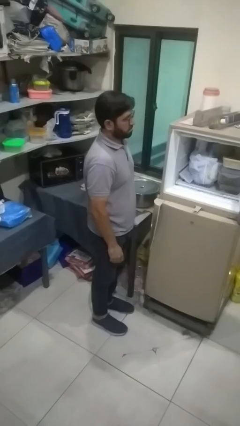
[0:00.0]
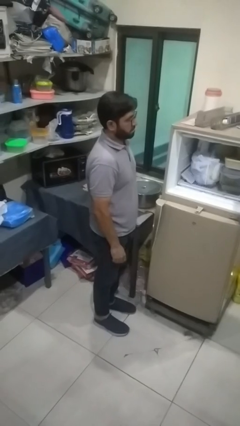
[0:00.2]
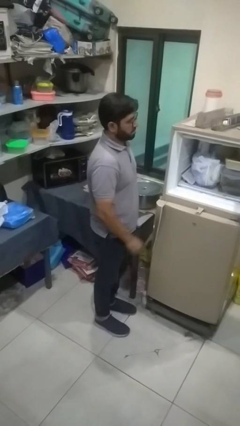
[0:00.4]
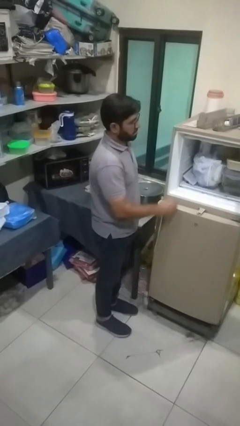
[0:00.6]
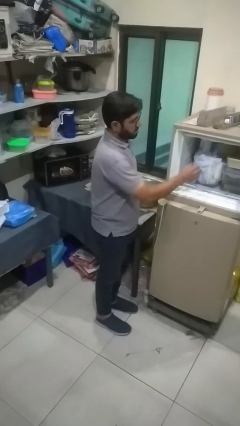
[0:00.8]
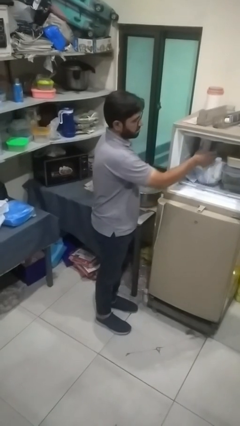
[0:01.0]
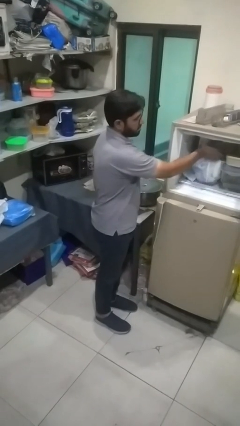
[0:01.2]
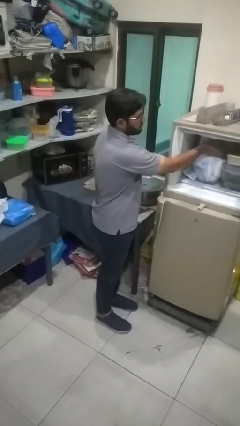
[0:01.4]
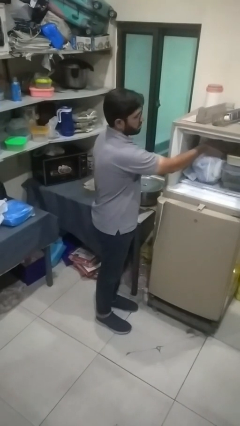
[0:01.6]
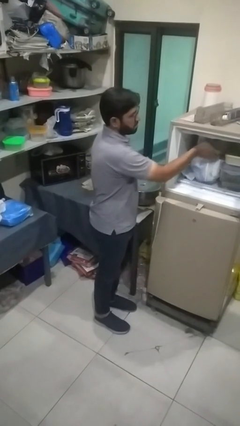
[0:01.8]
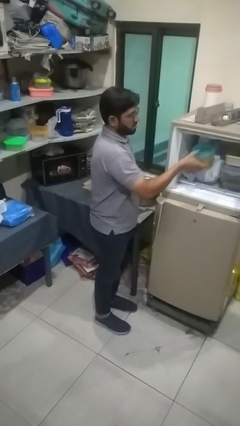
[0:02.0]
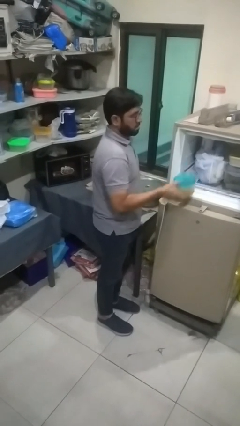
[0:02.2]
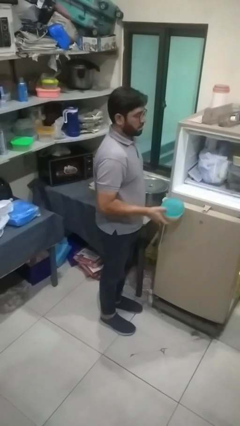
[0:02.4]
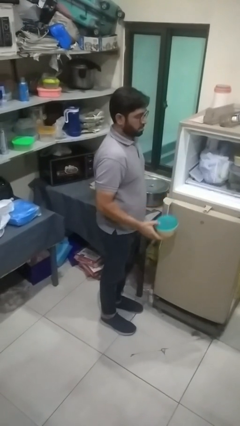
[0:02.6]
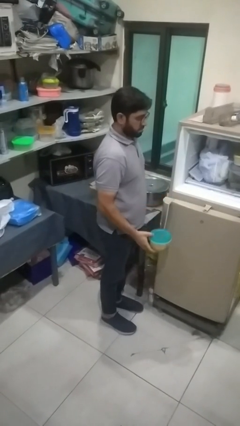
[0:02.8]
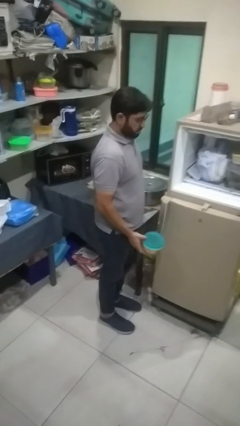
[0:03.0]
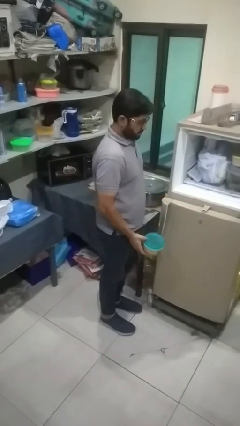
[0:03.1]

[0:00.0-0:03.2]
person takes object from refrigerator

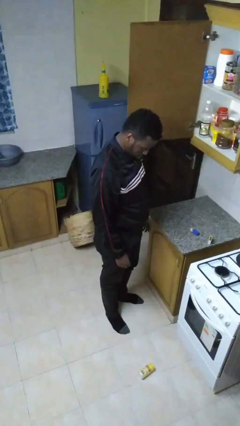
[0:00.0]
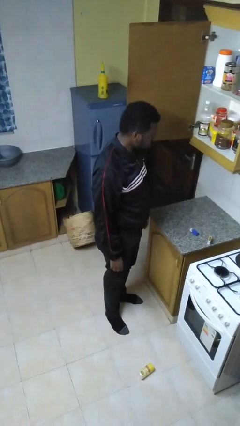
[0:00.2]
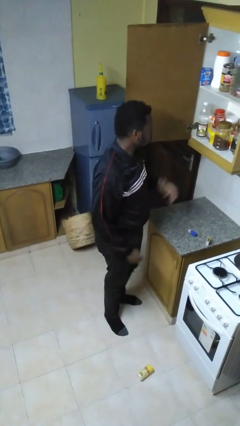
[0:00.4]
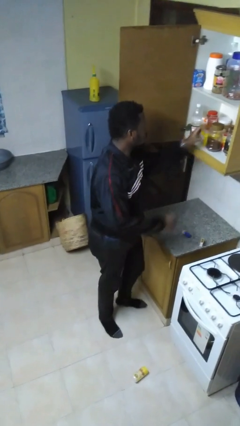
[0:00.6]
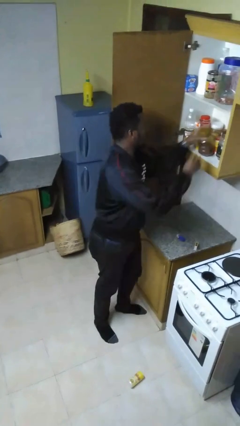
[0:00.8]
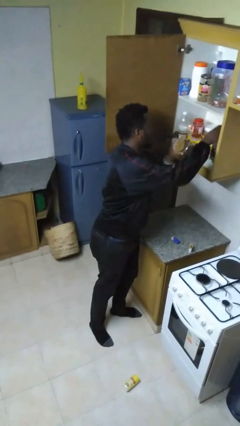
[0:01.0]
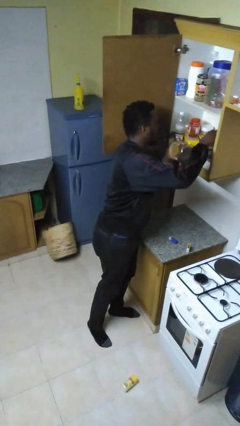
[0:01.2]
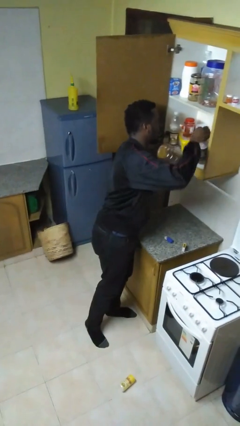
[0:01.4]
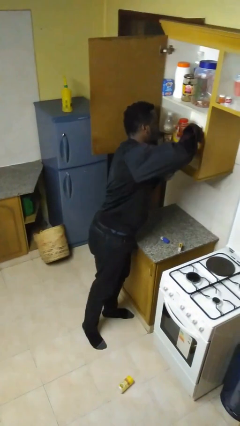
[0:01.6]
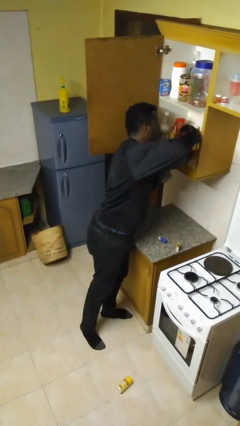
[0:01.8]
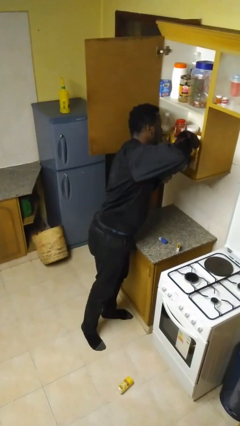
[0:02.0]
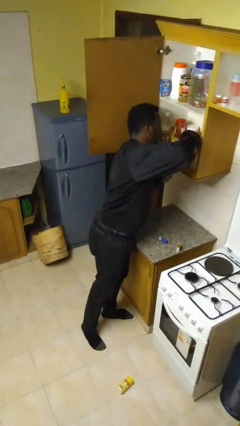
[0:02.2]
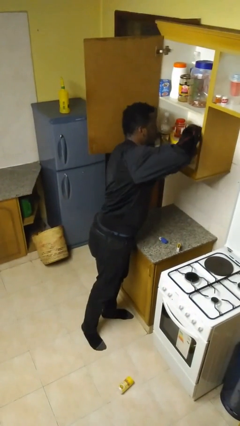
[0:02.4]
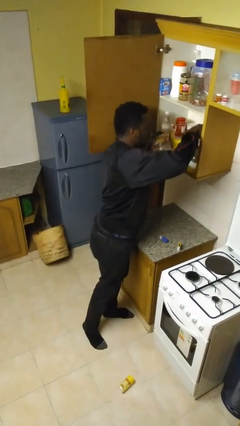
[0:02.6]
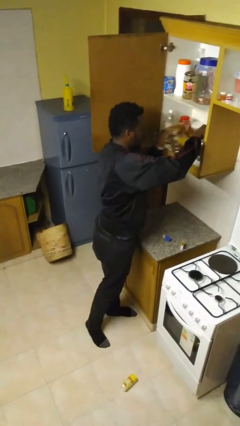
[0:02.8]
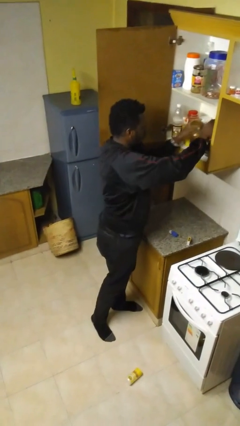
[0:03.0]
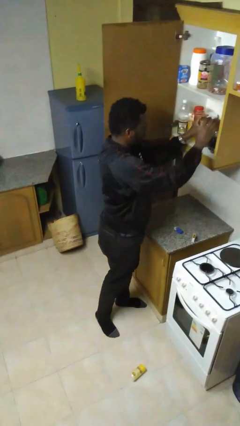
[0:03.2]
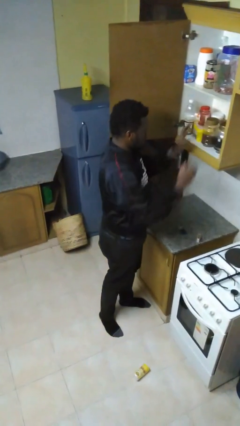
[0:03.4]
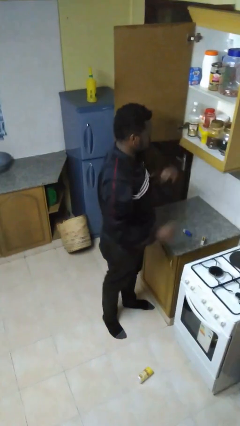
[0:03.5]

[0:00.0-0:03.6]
person searches in cabinet

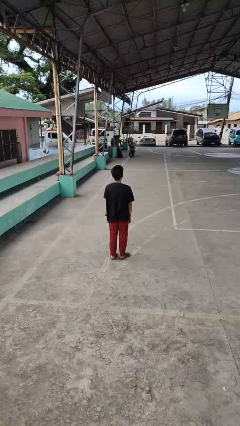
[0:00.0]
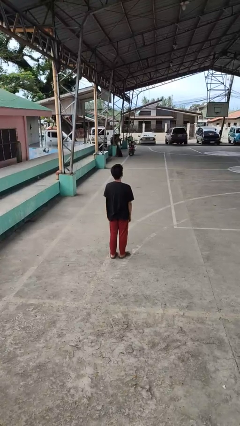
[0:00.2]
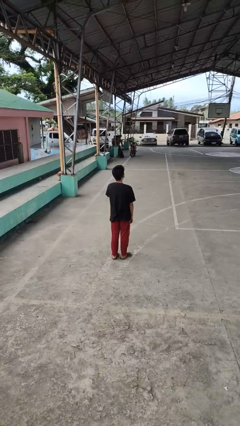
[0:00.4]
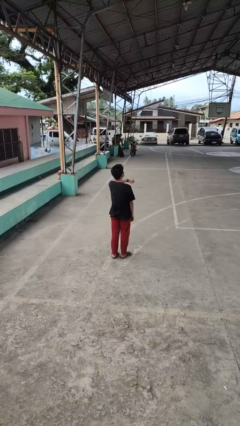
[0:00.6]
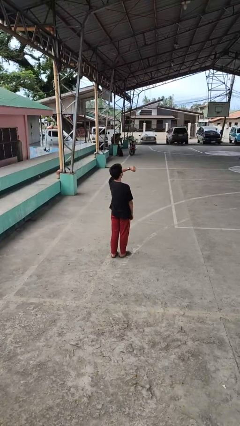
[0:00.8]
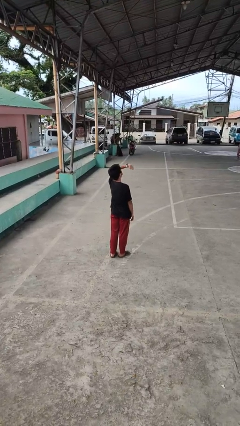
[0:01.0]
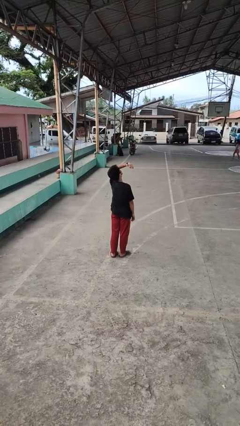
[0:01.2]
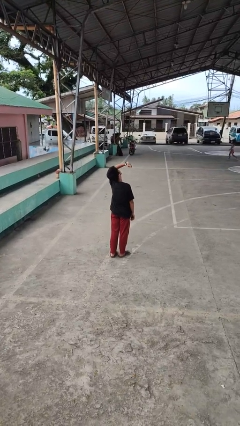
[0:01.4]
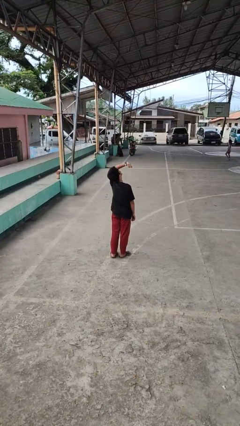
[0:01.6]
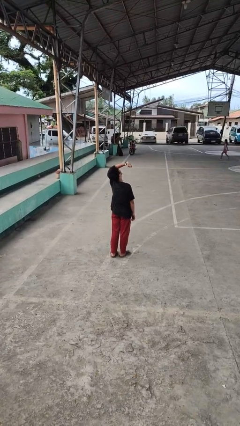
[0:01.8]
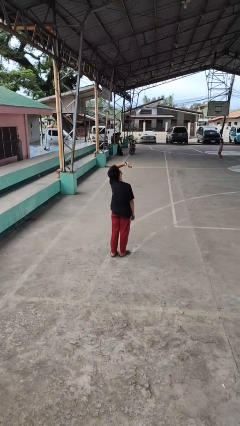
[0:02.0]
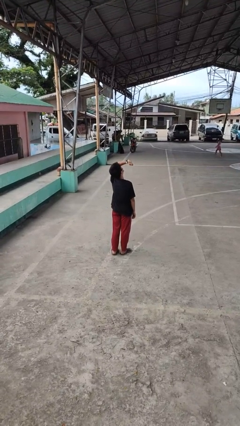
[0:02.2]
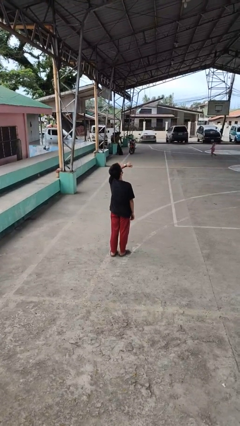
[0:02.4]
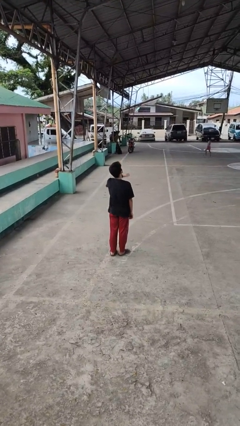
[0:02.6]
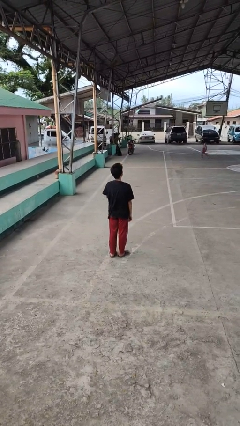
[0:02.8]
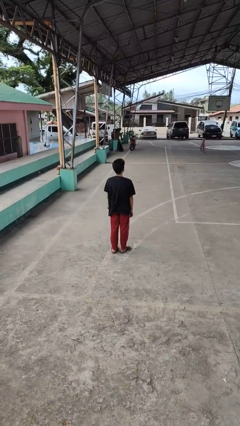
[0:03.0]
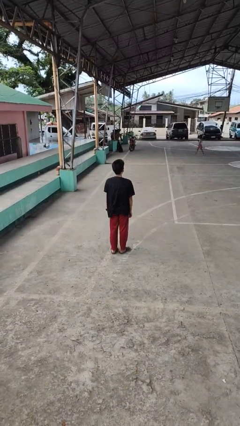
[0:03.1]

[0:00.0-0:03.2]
person looks at wristwatch

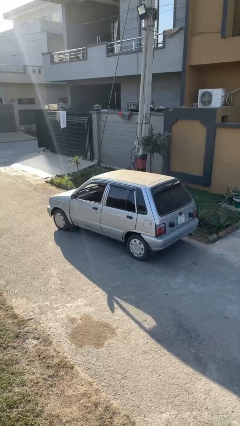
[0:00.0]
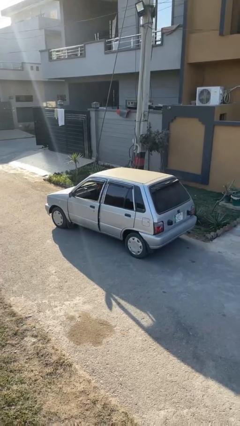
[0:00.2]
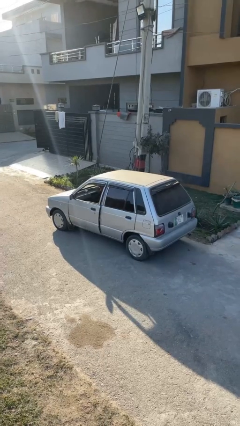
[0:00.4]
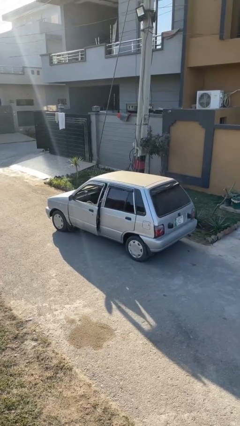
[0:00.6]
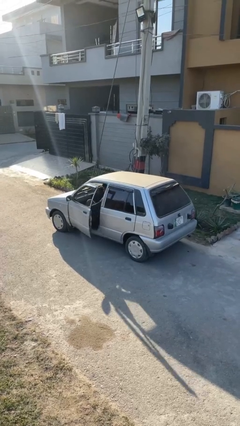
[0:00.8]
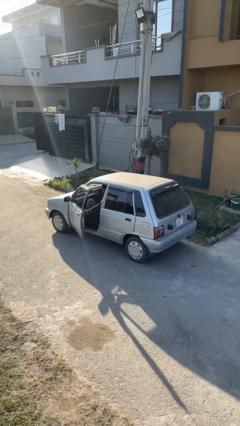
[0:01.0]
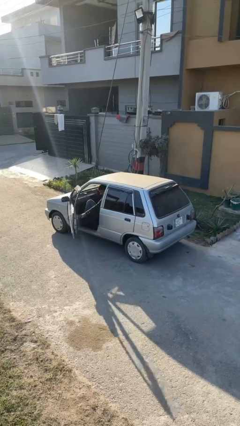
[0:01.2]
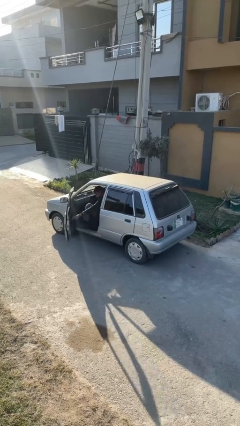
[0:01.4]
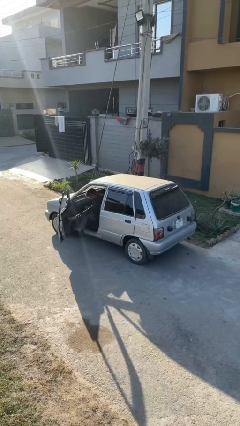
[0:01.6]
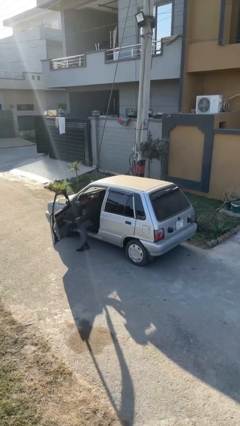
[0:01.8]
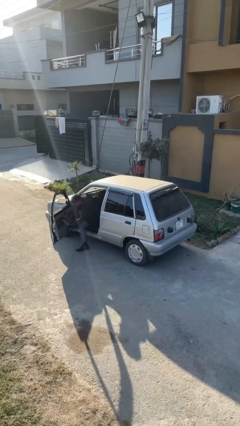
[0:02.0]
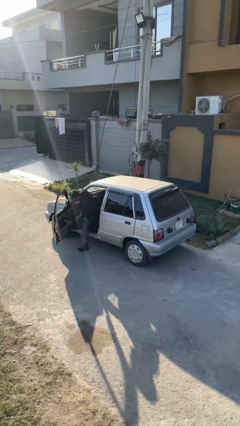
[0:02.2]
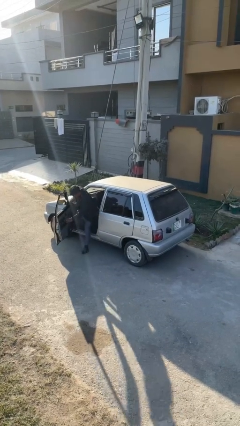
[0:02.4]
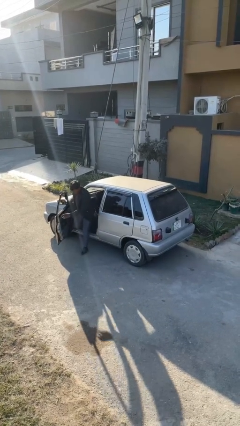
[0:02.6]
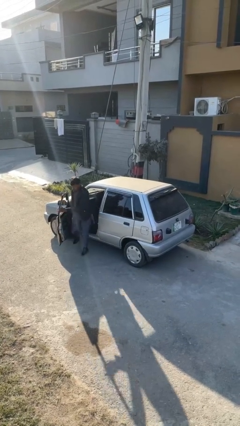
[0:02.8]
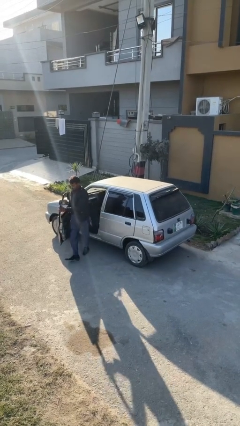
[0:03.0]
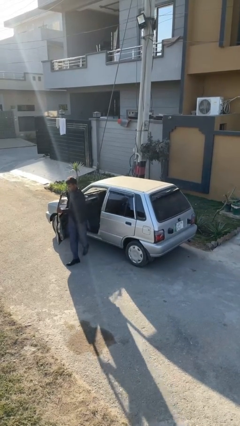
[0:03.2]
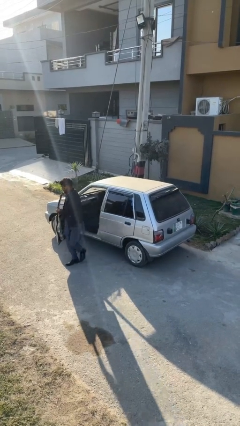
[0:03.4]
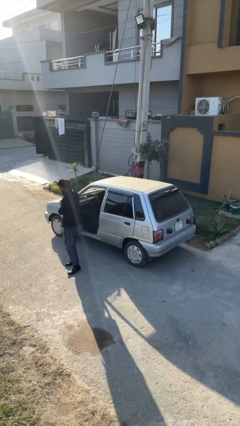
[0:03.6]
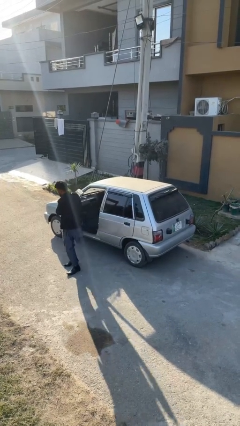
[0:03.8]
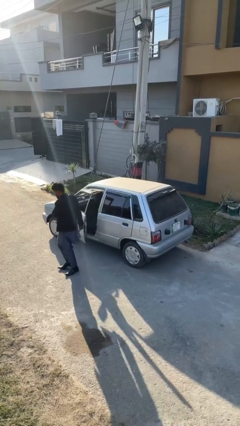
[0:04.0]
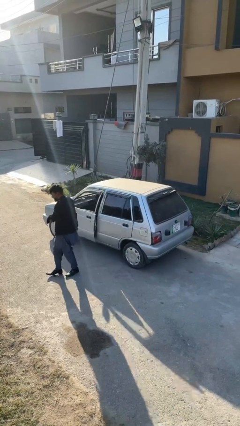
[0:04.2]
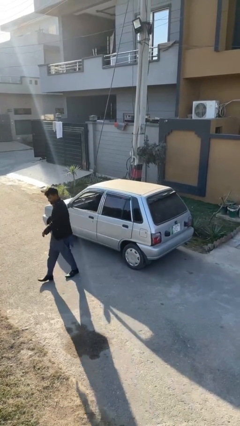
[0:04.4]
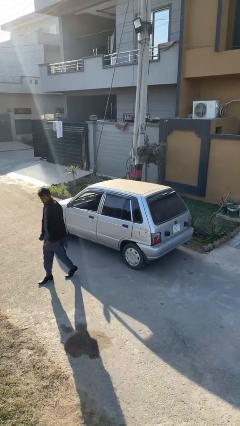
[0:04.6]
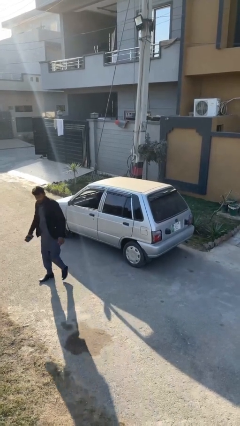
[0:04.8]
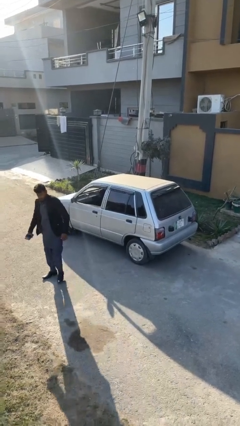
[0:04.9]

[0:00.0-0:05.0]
car drops off person

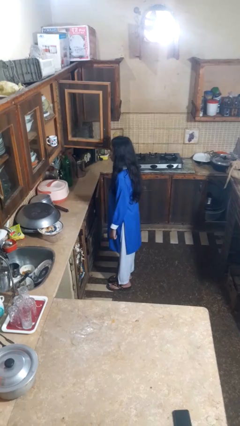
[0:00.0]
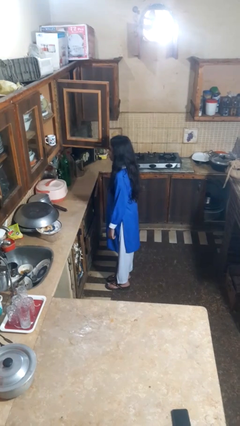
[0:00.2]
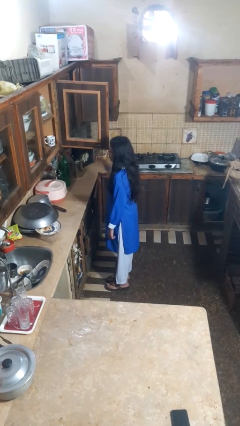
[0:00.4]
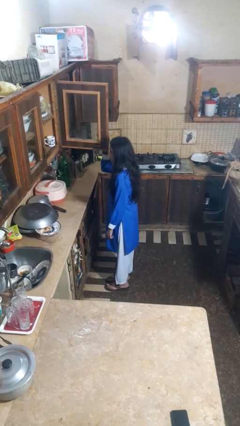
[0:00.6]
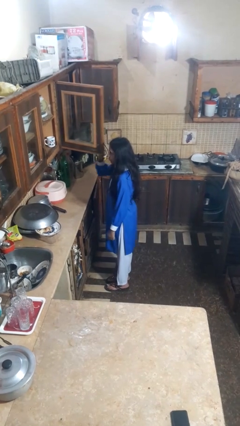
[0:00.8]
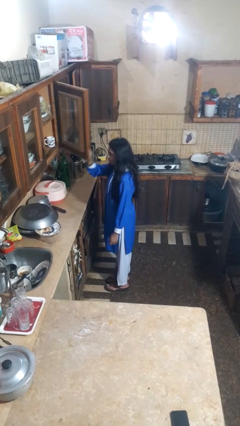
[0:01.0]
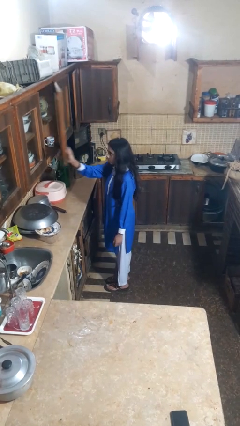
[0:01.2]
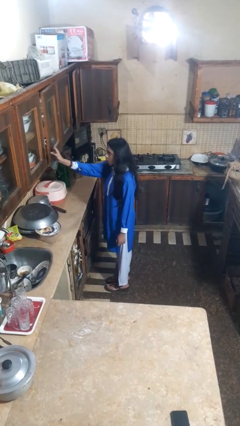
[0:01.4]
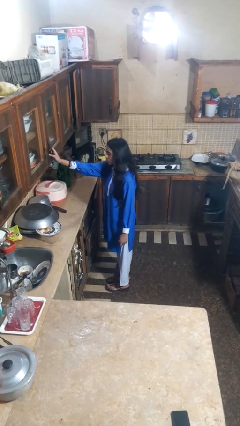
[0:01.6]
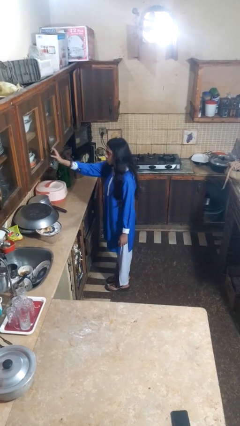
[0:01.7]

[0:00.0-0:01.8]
person closes cabinet

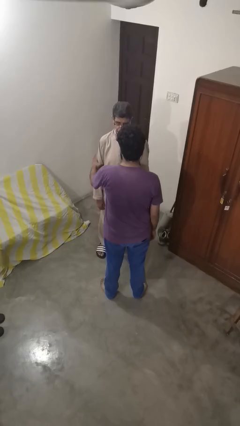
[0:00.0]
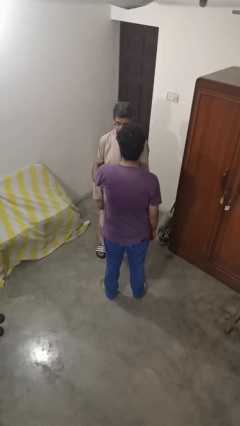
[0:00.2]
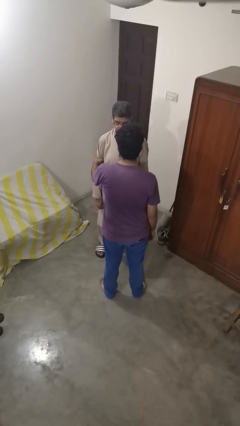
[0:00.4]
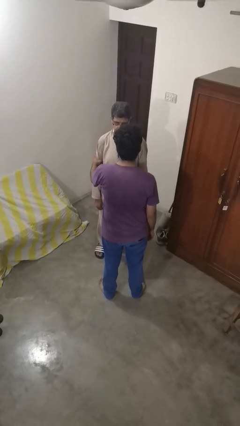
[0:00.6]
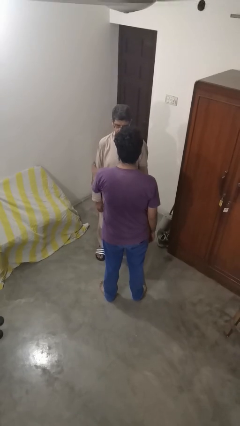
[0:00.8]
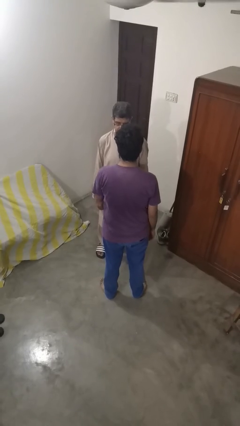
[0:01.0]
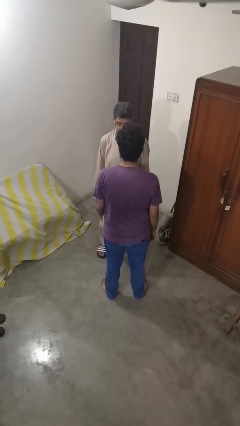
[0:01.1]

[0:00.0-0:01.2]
person grabs person by bicep
